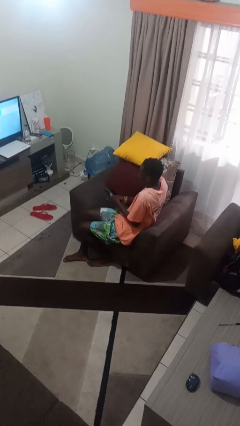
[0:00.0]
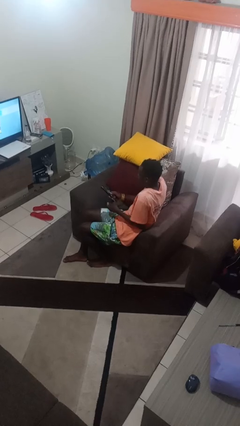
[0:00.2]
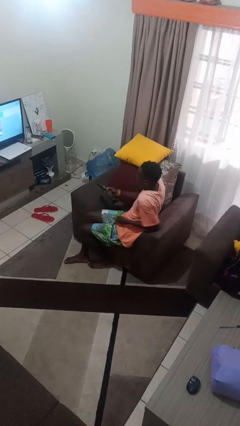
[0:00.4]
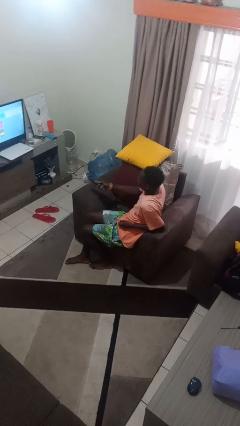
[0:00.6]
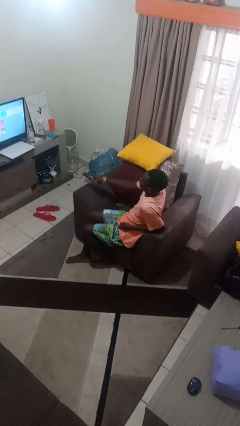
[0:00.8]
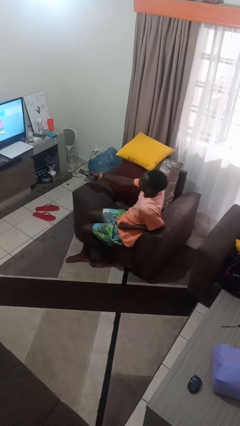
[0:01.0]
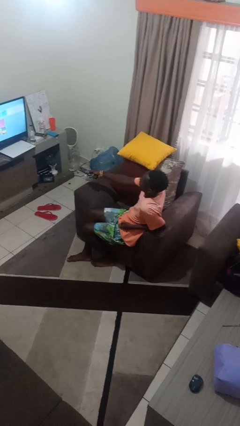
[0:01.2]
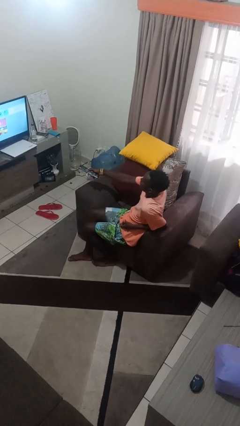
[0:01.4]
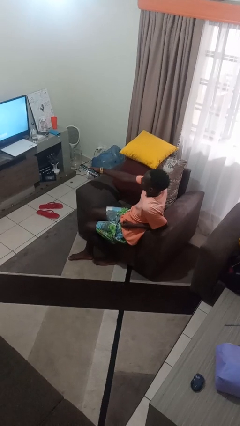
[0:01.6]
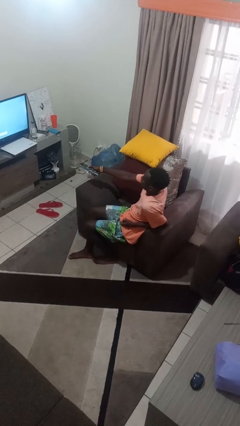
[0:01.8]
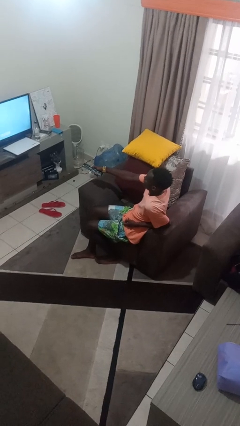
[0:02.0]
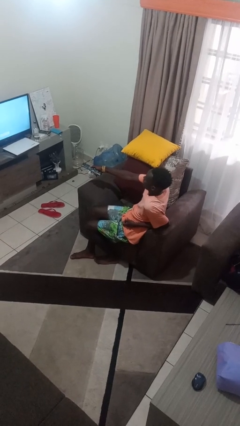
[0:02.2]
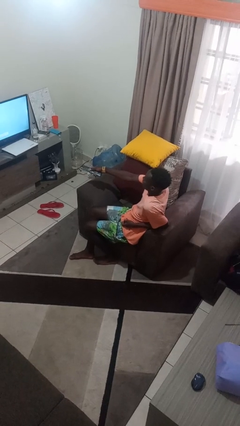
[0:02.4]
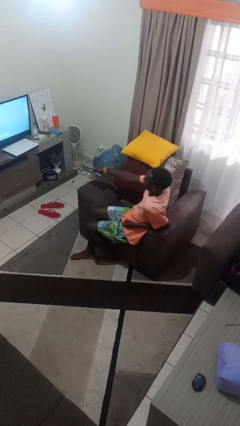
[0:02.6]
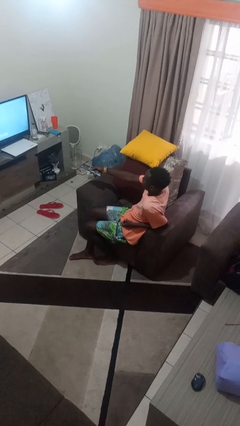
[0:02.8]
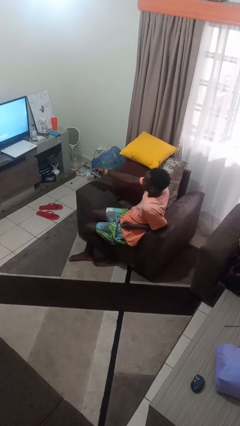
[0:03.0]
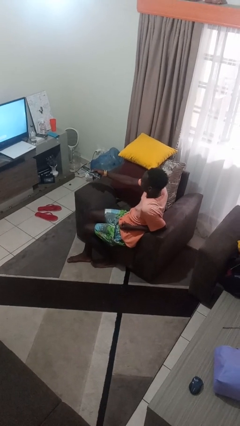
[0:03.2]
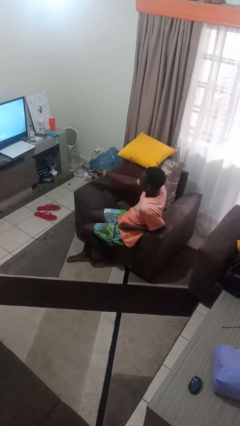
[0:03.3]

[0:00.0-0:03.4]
person uses television remote

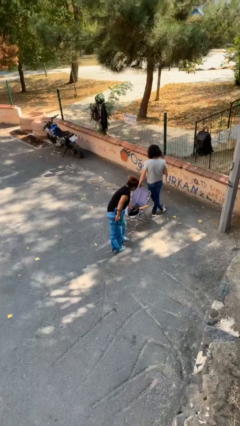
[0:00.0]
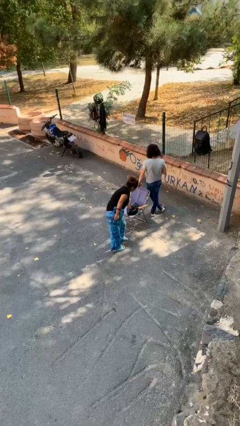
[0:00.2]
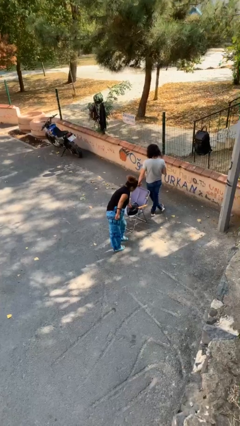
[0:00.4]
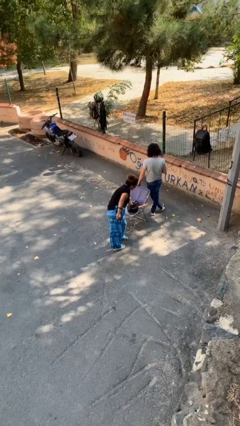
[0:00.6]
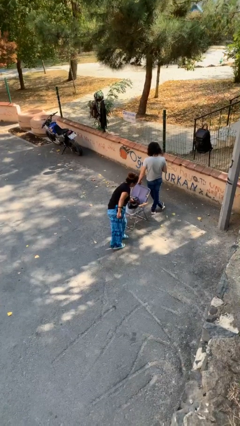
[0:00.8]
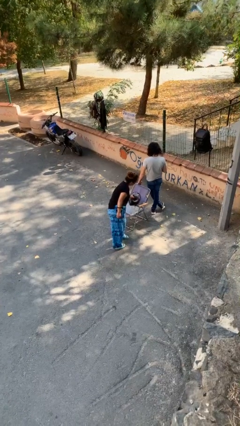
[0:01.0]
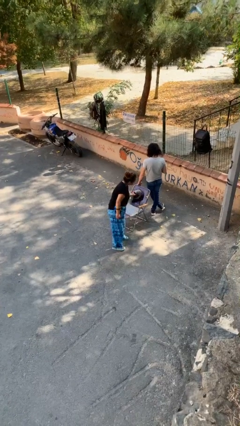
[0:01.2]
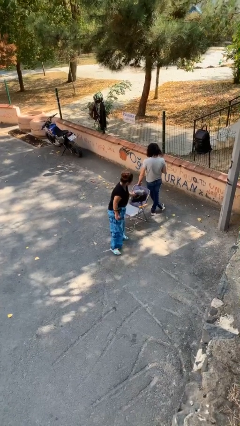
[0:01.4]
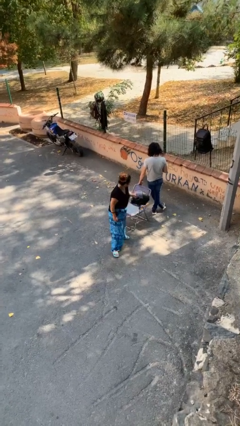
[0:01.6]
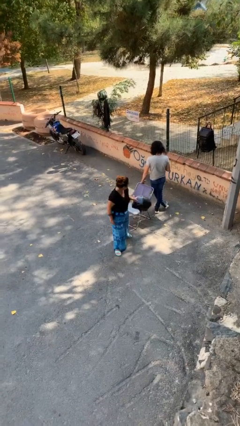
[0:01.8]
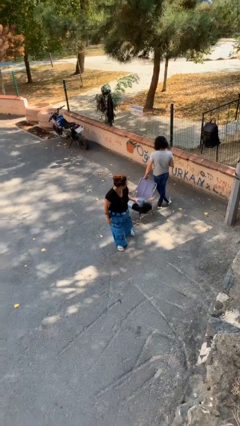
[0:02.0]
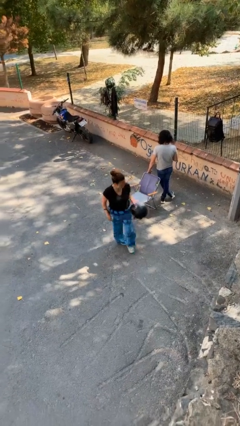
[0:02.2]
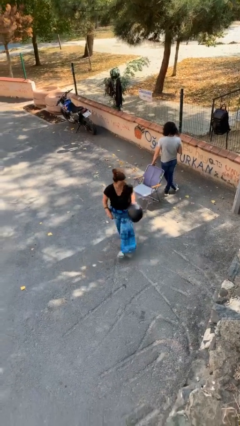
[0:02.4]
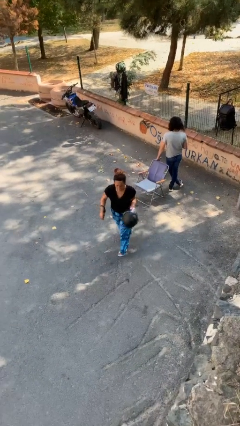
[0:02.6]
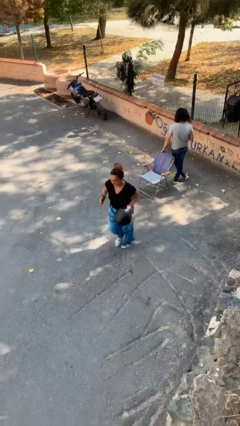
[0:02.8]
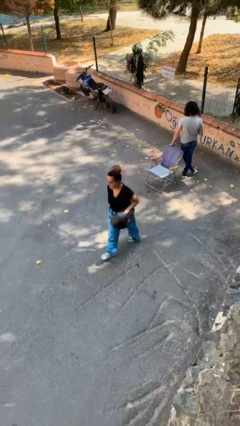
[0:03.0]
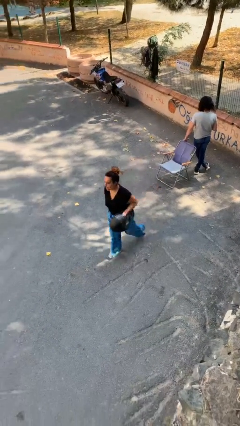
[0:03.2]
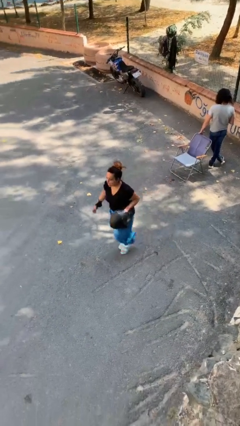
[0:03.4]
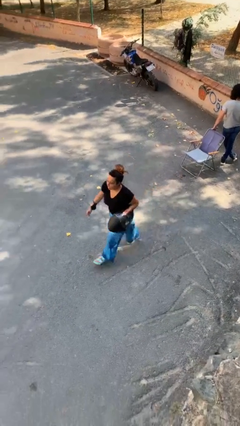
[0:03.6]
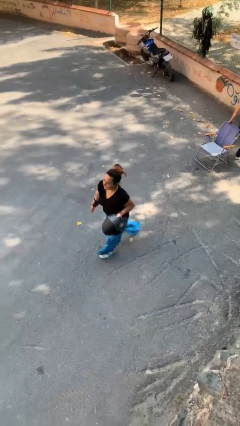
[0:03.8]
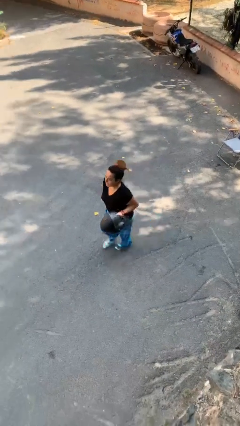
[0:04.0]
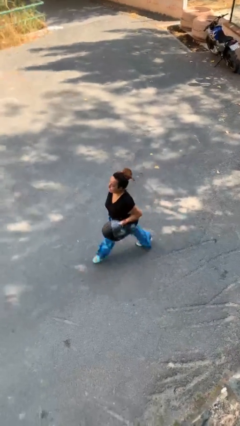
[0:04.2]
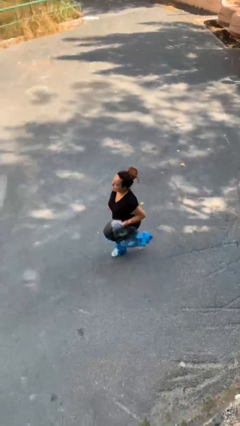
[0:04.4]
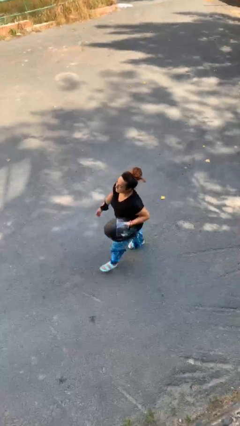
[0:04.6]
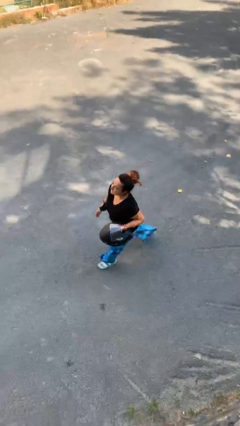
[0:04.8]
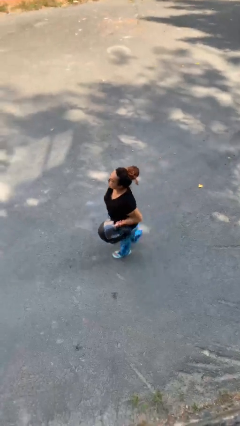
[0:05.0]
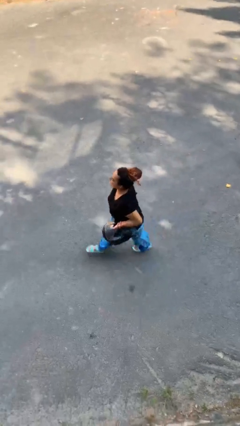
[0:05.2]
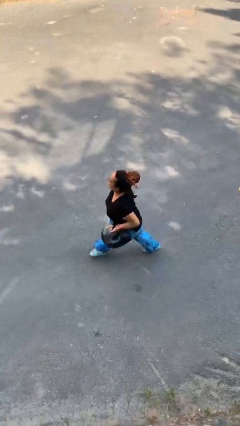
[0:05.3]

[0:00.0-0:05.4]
person steals object from person

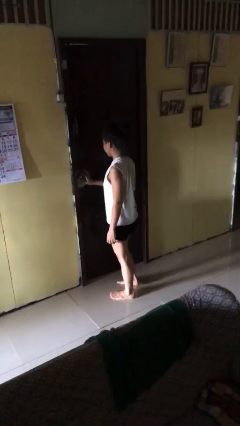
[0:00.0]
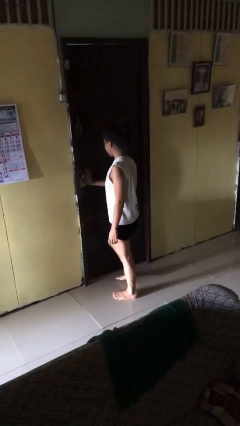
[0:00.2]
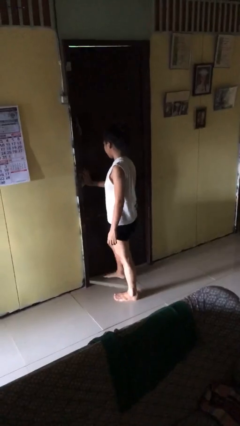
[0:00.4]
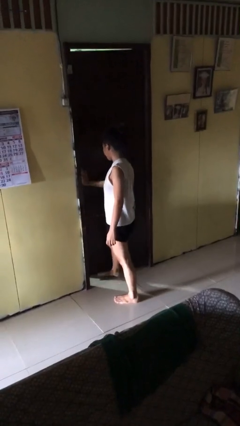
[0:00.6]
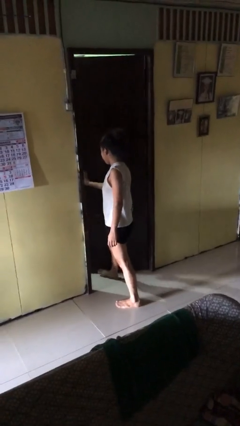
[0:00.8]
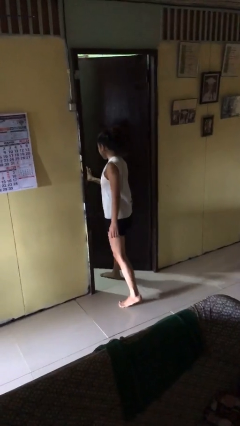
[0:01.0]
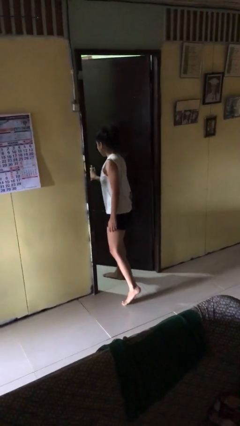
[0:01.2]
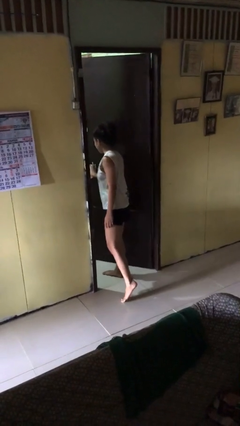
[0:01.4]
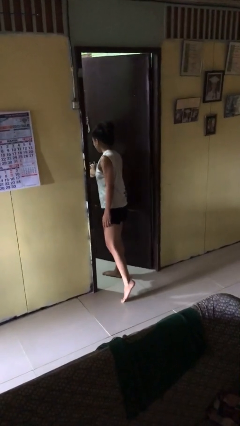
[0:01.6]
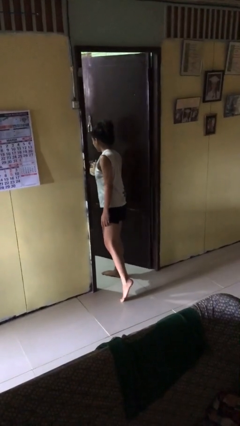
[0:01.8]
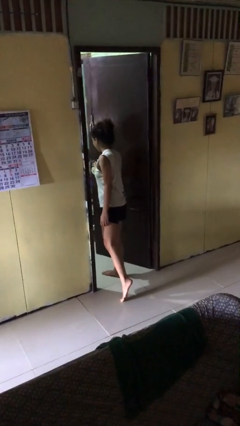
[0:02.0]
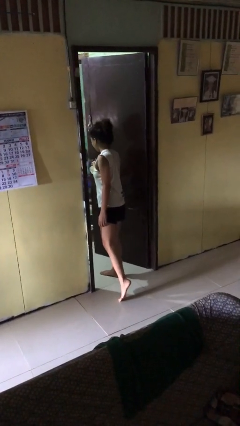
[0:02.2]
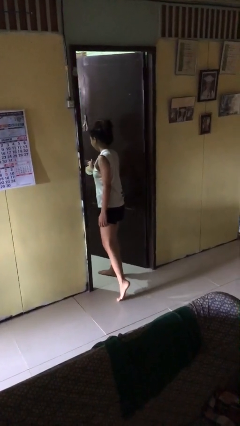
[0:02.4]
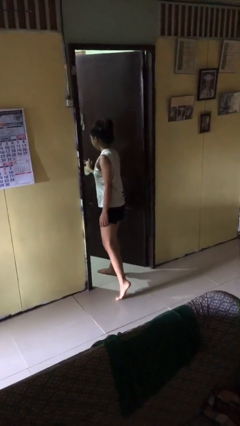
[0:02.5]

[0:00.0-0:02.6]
person opens facility door

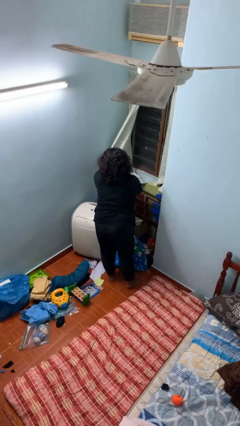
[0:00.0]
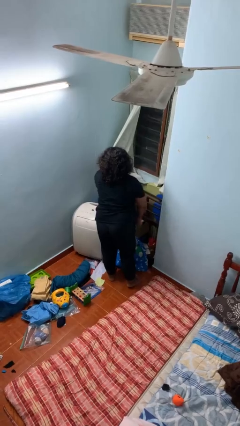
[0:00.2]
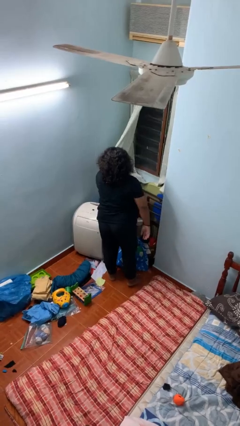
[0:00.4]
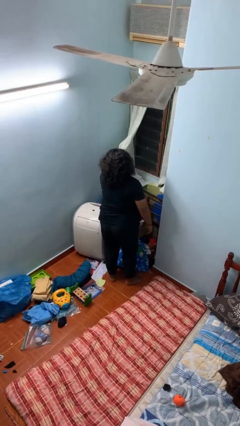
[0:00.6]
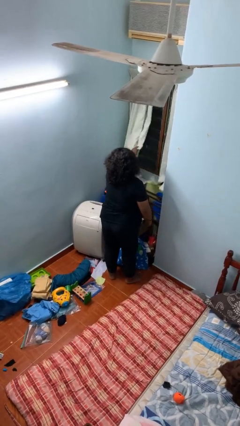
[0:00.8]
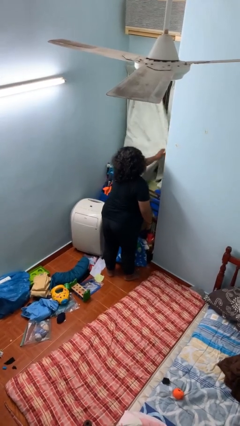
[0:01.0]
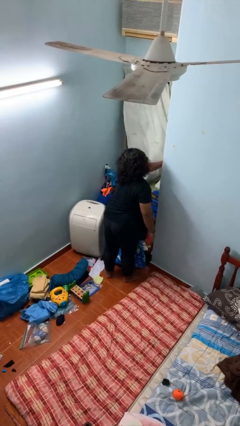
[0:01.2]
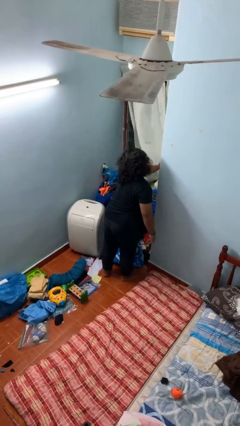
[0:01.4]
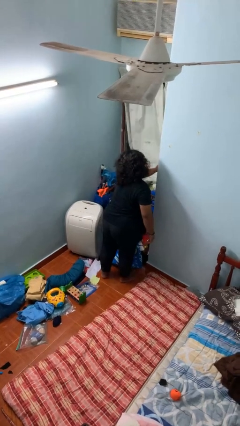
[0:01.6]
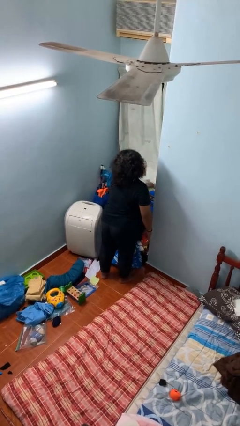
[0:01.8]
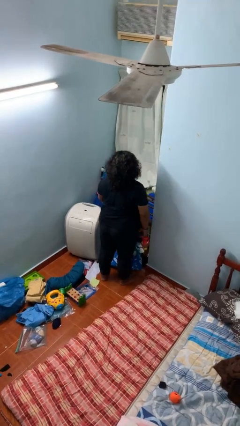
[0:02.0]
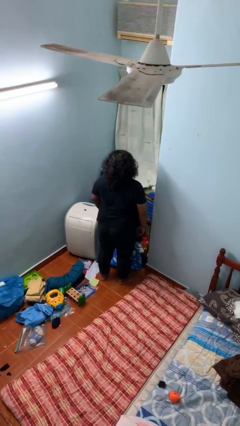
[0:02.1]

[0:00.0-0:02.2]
person closes curtains

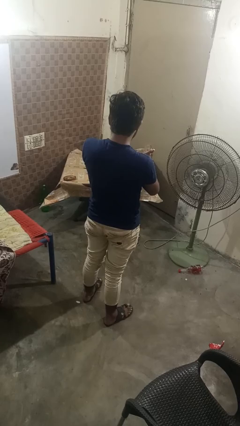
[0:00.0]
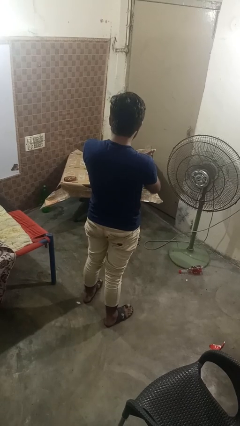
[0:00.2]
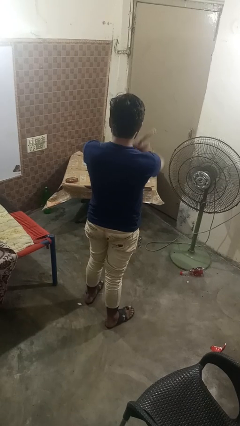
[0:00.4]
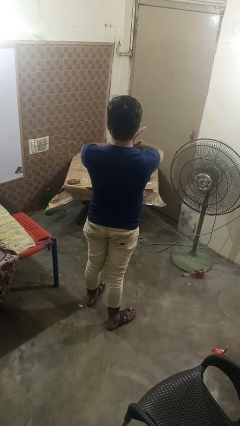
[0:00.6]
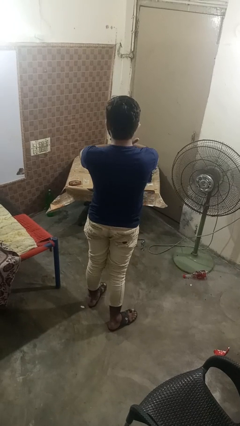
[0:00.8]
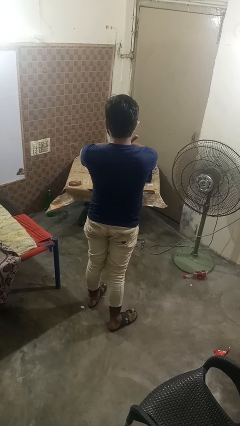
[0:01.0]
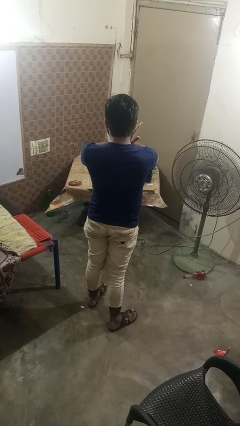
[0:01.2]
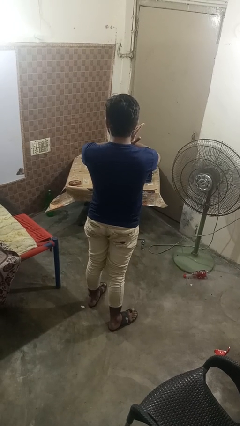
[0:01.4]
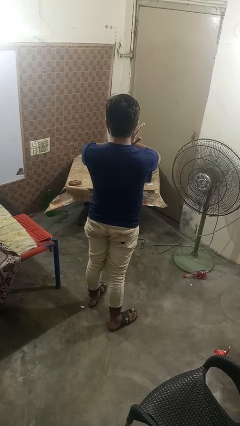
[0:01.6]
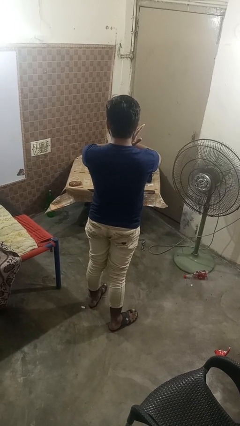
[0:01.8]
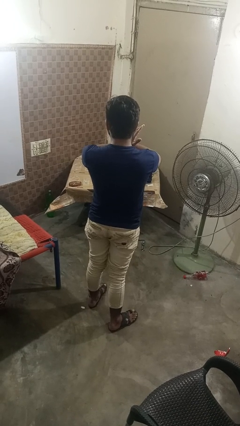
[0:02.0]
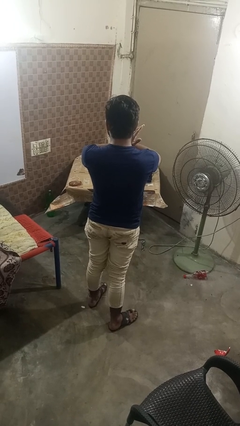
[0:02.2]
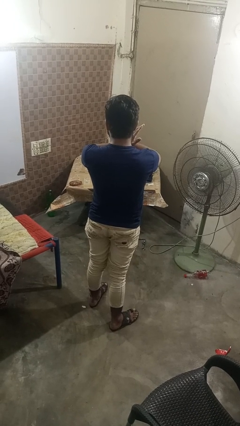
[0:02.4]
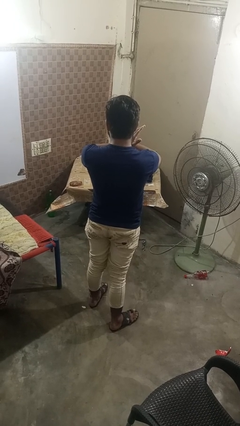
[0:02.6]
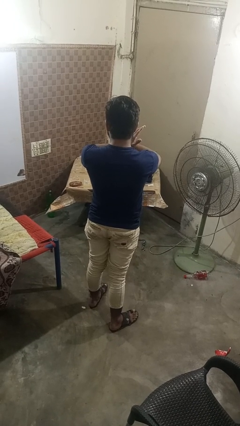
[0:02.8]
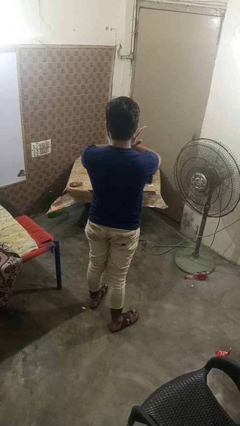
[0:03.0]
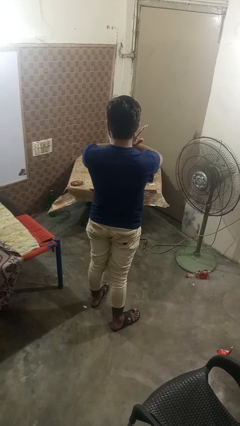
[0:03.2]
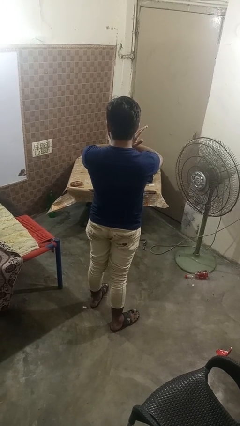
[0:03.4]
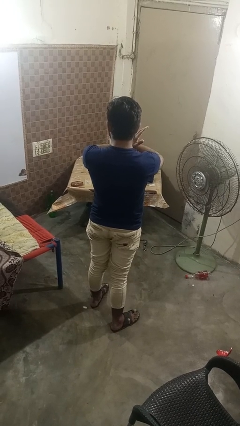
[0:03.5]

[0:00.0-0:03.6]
person karate chop

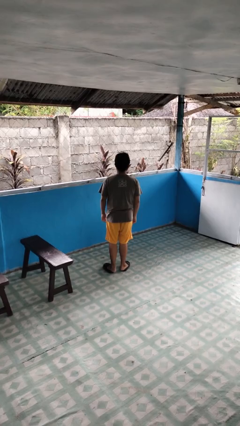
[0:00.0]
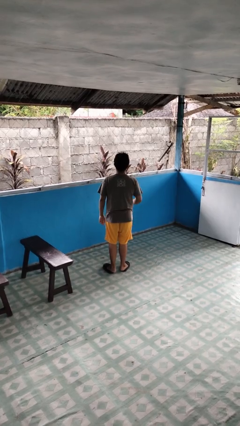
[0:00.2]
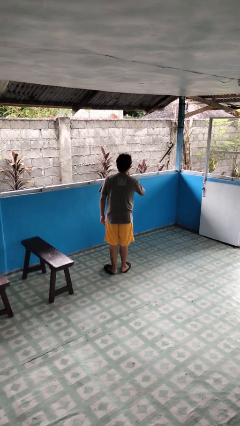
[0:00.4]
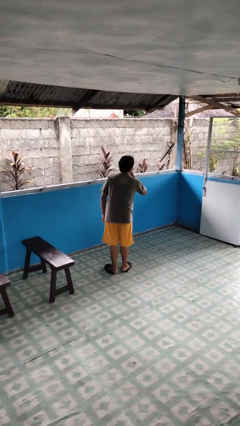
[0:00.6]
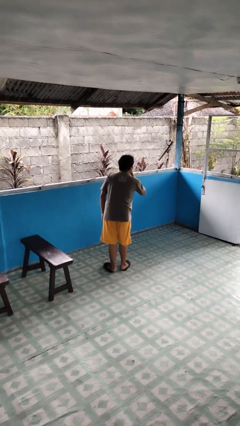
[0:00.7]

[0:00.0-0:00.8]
person gestures be quiet
